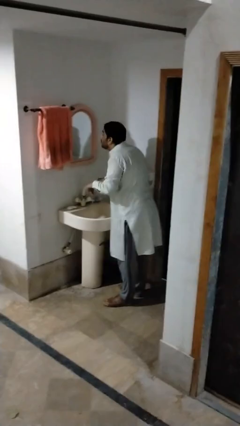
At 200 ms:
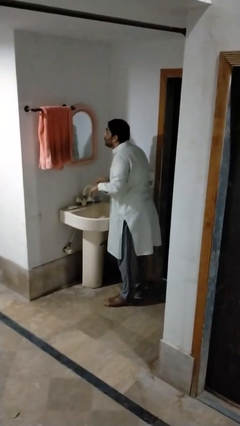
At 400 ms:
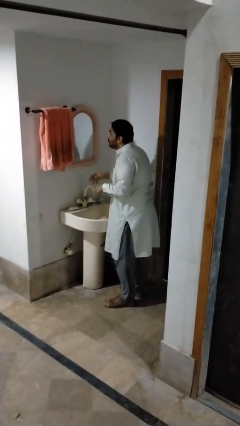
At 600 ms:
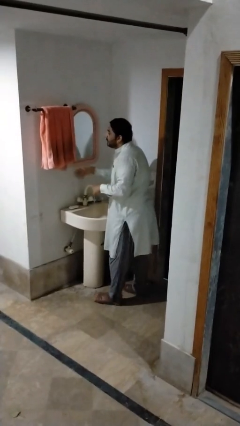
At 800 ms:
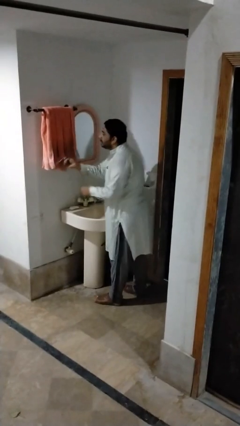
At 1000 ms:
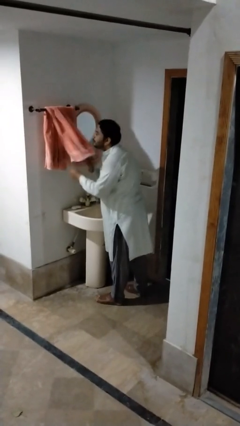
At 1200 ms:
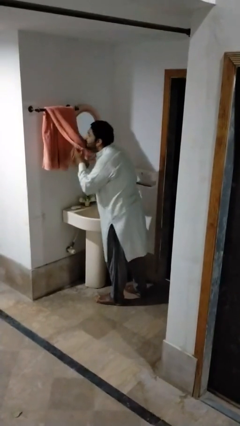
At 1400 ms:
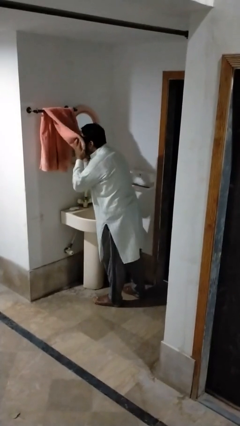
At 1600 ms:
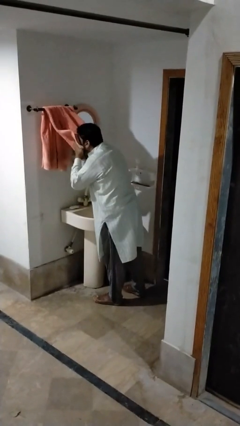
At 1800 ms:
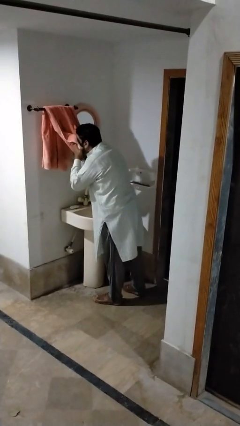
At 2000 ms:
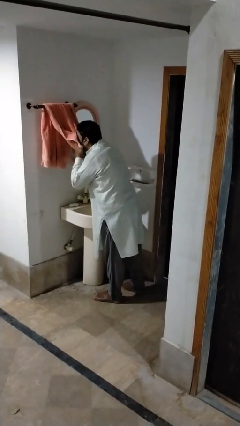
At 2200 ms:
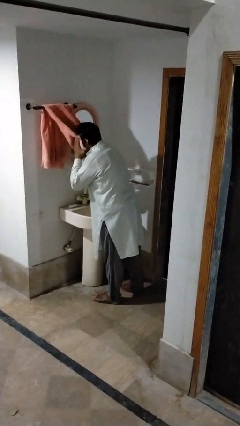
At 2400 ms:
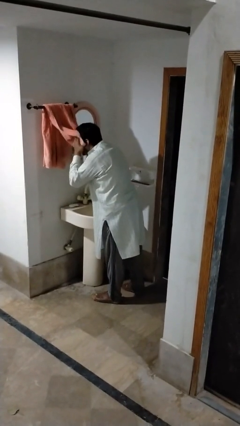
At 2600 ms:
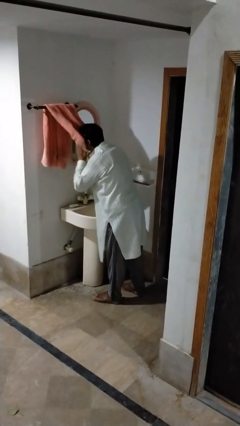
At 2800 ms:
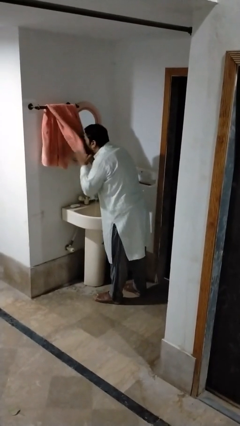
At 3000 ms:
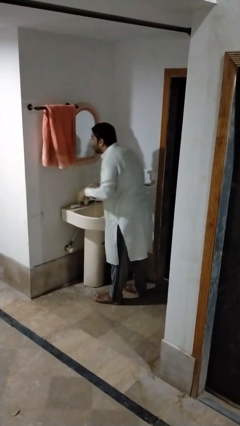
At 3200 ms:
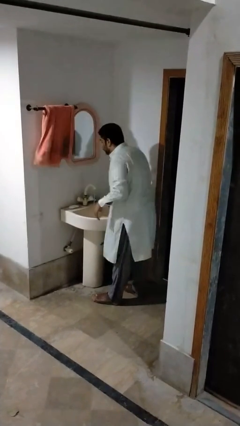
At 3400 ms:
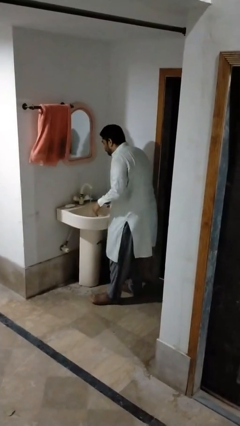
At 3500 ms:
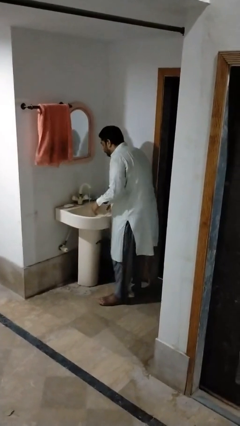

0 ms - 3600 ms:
person dries face with towel

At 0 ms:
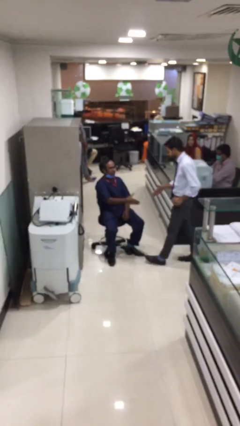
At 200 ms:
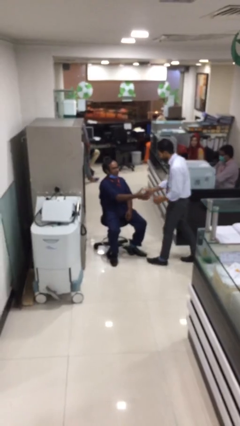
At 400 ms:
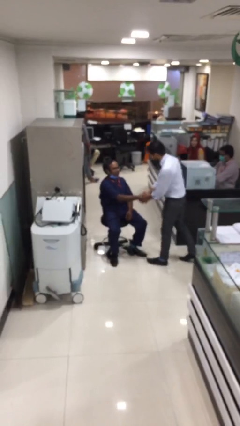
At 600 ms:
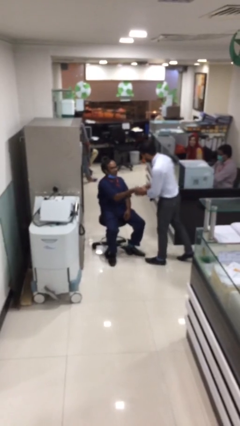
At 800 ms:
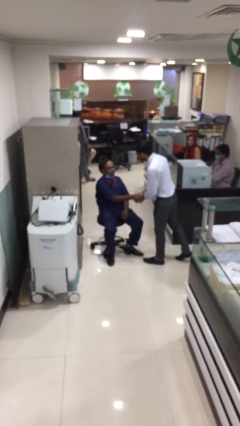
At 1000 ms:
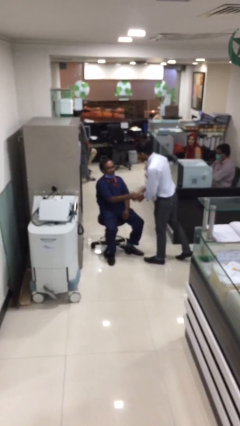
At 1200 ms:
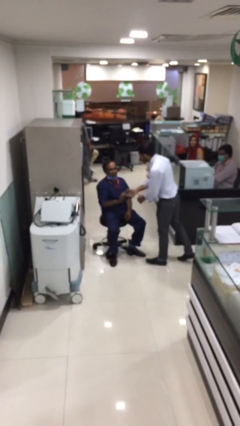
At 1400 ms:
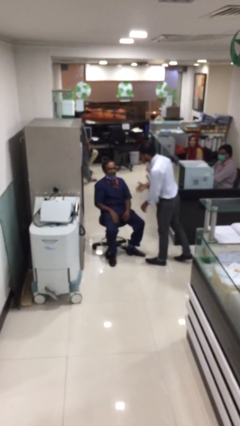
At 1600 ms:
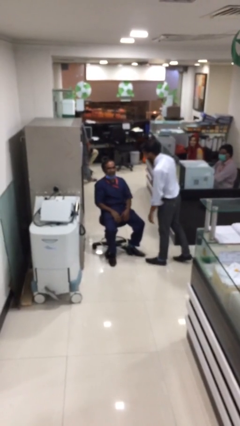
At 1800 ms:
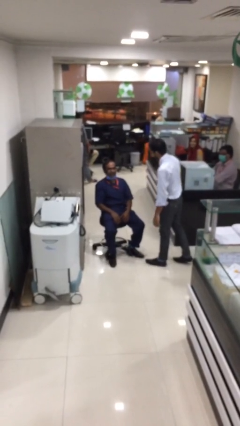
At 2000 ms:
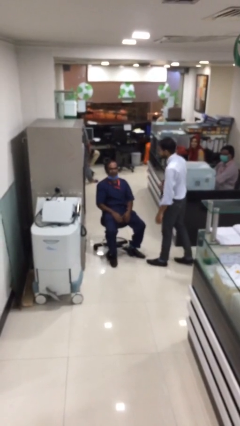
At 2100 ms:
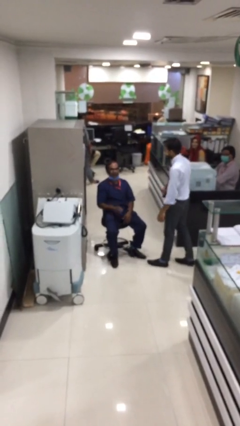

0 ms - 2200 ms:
person shakes hand

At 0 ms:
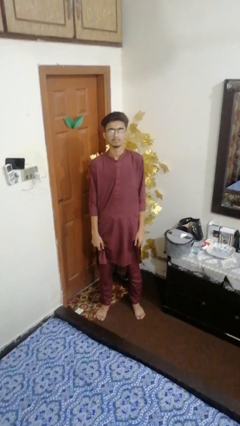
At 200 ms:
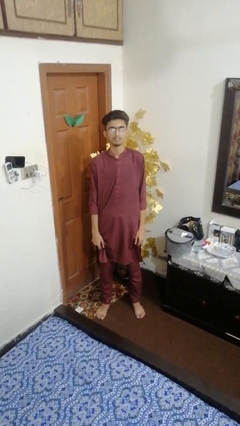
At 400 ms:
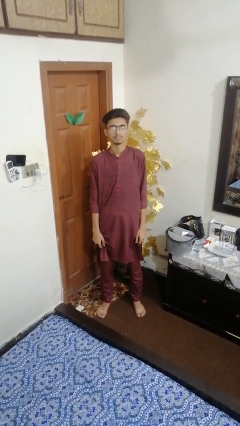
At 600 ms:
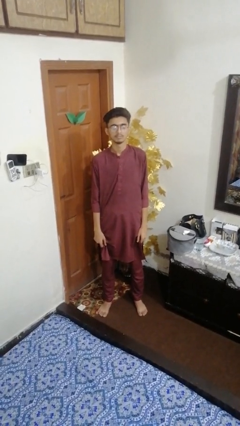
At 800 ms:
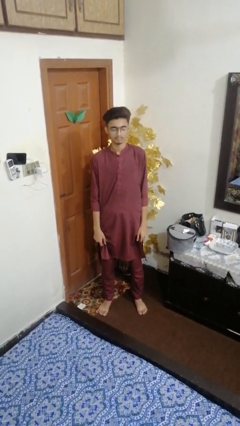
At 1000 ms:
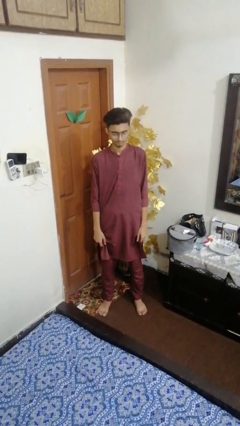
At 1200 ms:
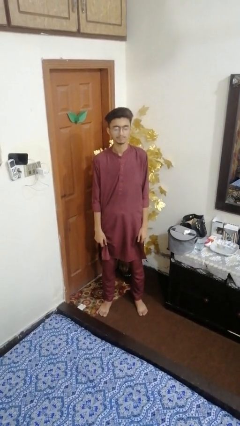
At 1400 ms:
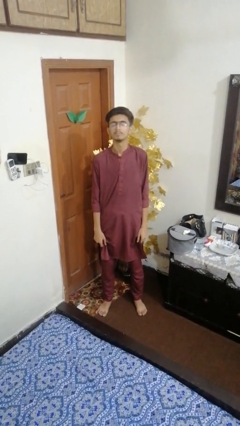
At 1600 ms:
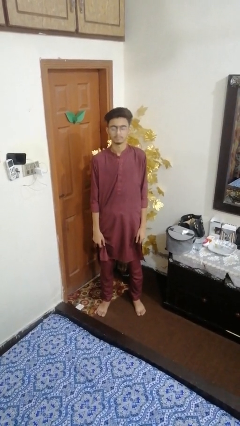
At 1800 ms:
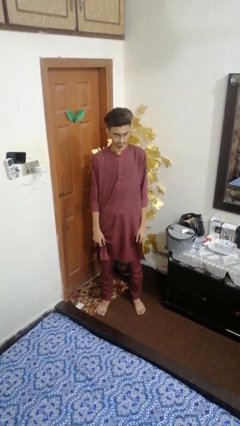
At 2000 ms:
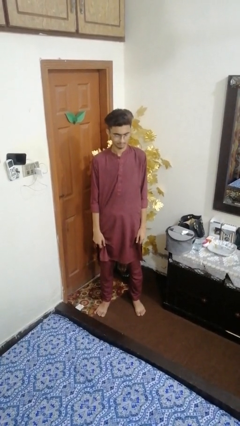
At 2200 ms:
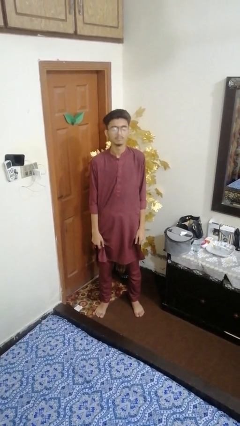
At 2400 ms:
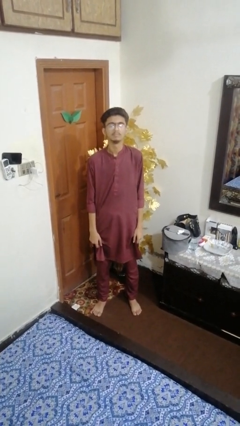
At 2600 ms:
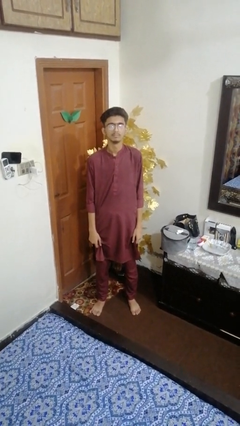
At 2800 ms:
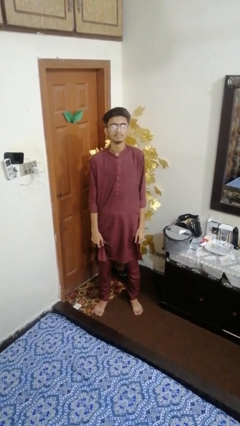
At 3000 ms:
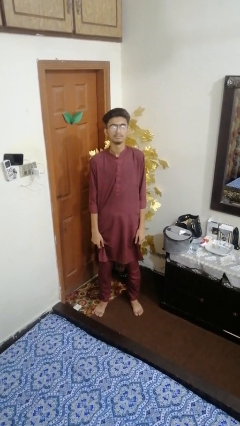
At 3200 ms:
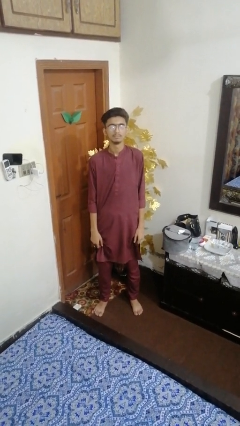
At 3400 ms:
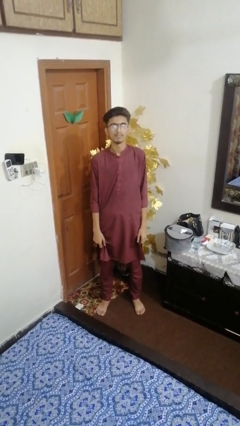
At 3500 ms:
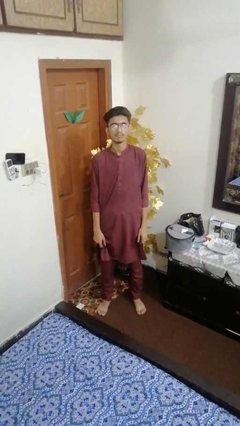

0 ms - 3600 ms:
person nods head

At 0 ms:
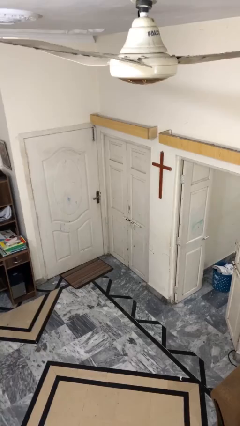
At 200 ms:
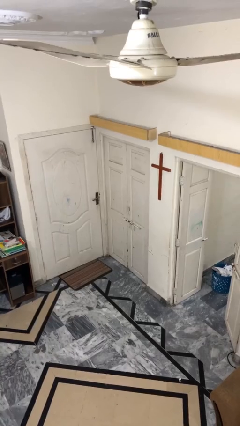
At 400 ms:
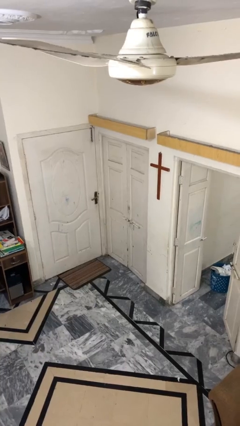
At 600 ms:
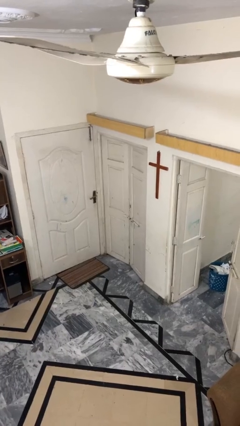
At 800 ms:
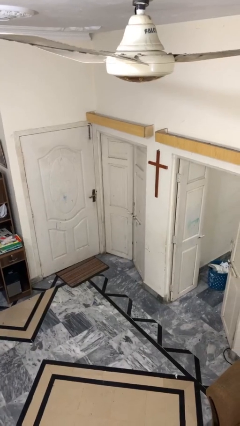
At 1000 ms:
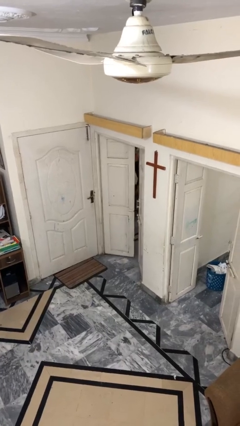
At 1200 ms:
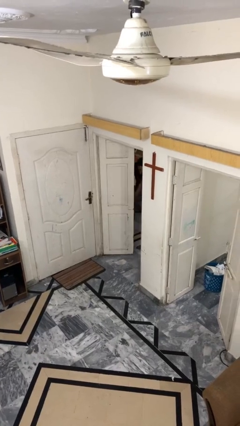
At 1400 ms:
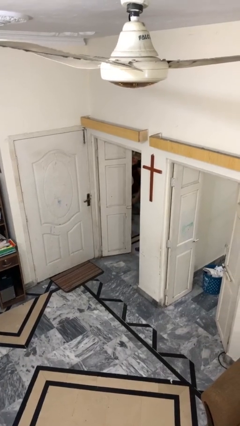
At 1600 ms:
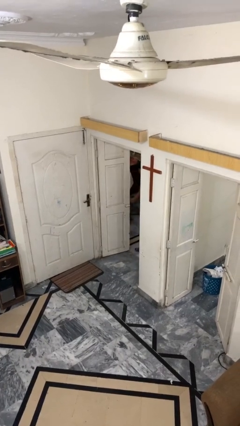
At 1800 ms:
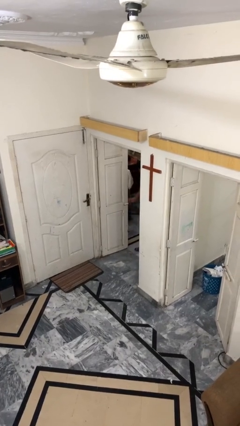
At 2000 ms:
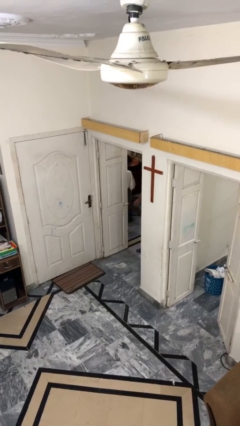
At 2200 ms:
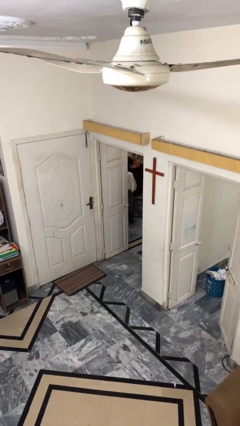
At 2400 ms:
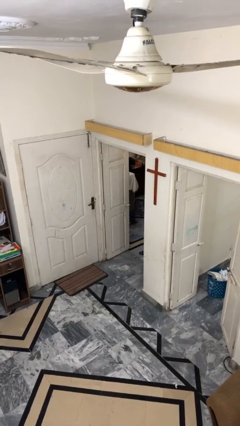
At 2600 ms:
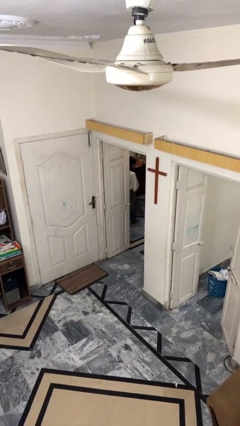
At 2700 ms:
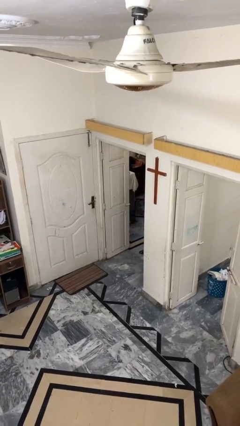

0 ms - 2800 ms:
person opens facility door

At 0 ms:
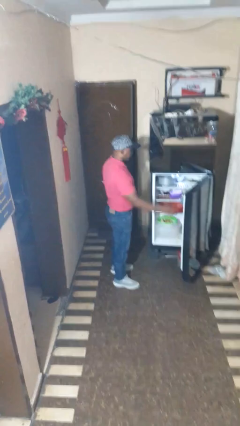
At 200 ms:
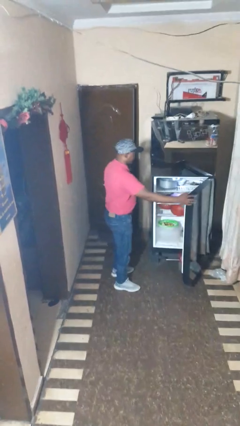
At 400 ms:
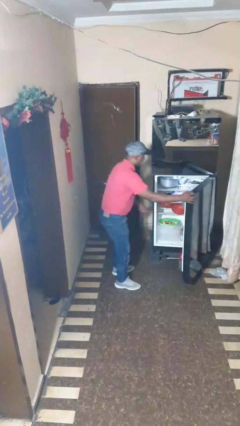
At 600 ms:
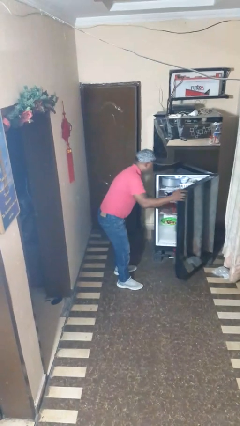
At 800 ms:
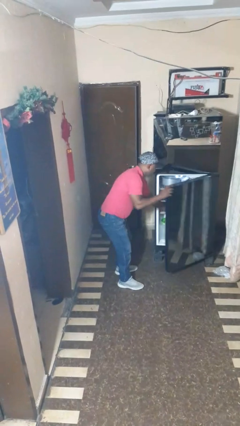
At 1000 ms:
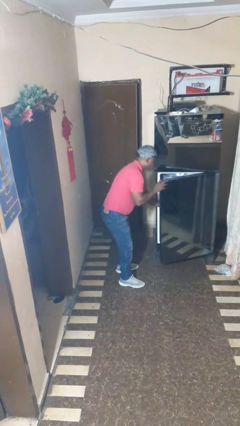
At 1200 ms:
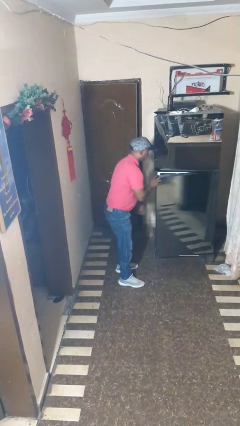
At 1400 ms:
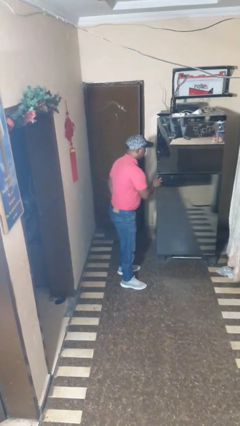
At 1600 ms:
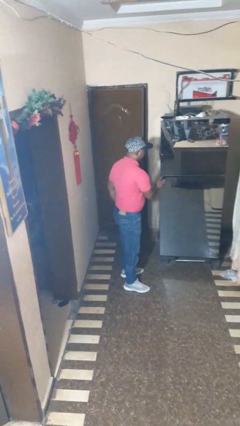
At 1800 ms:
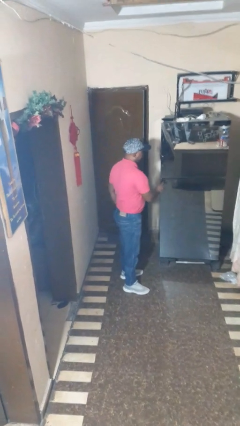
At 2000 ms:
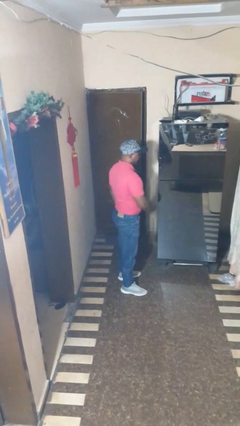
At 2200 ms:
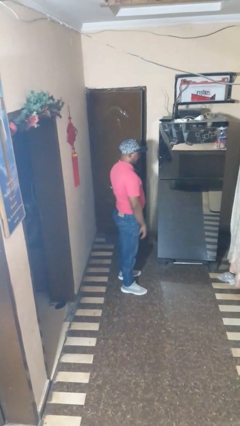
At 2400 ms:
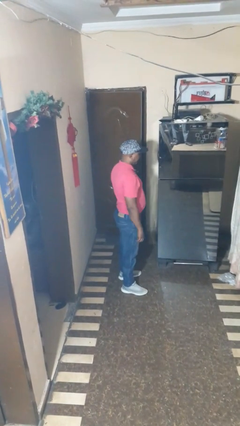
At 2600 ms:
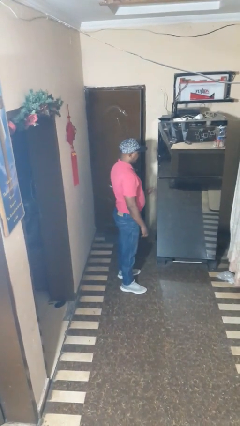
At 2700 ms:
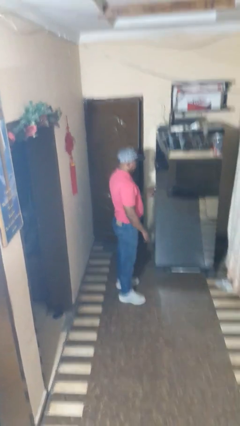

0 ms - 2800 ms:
person closes refrigerator

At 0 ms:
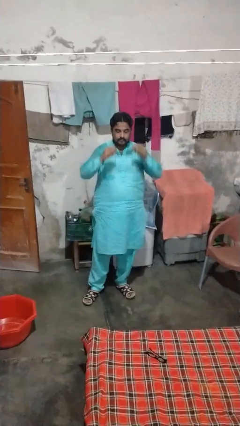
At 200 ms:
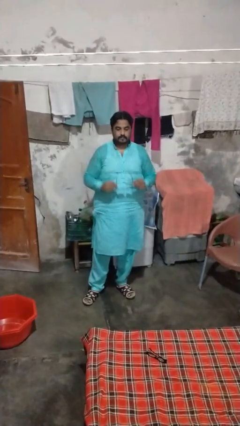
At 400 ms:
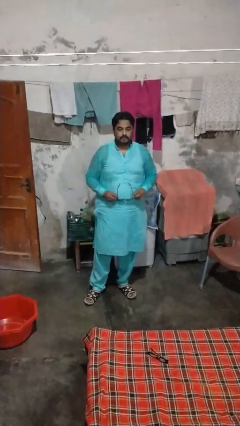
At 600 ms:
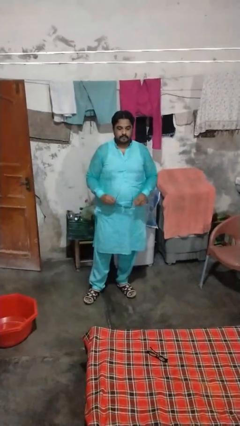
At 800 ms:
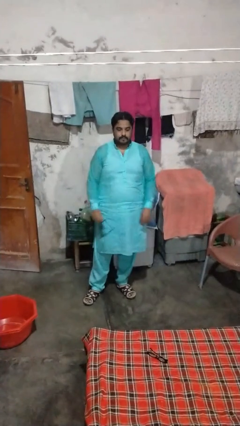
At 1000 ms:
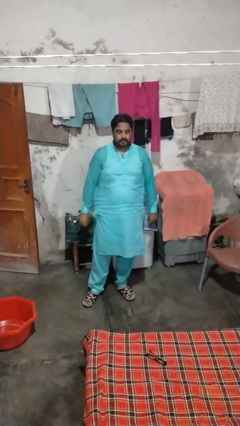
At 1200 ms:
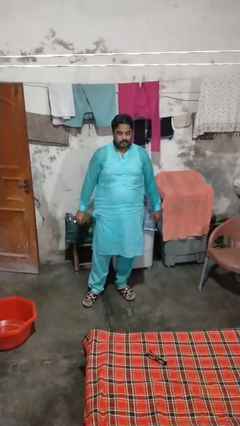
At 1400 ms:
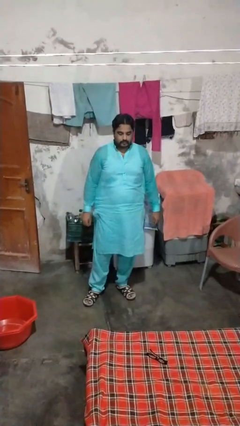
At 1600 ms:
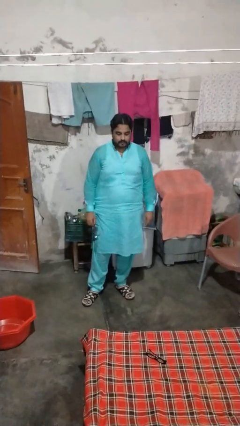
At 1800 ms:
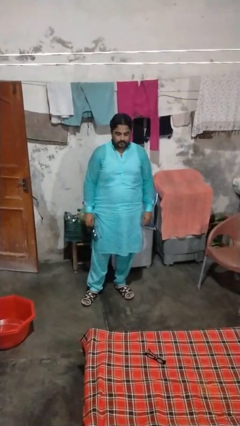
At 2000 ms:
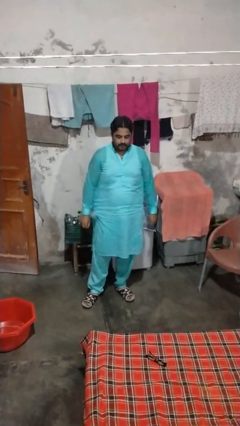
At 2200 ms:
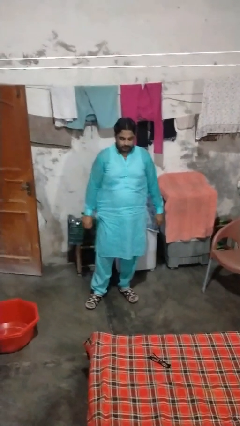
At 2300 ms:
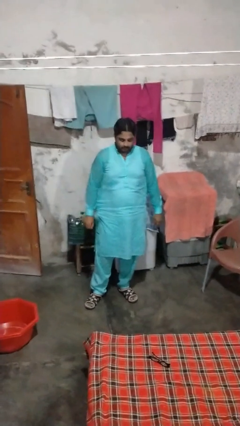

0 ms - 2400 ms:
person takes off sunglasses
